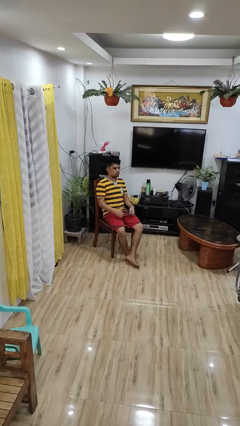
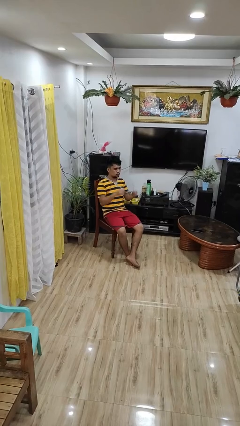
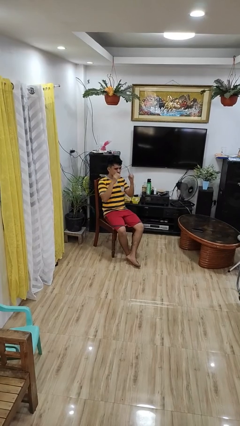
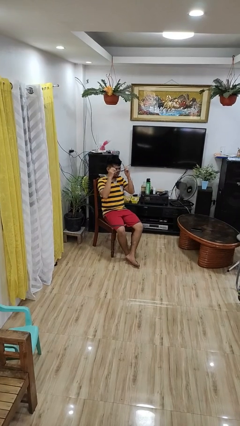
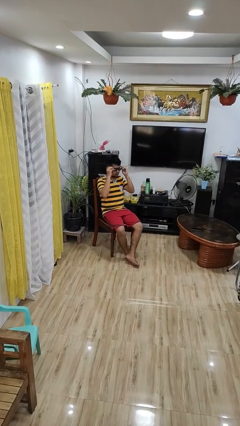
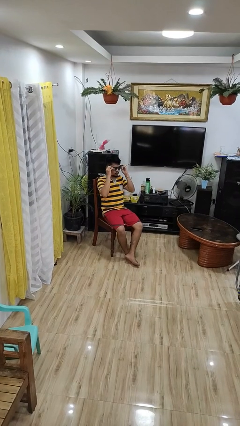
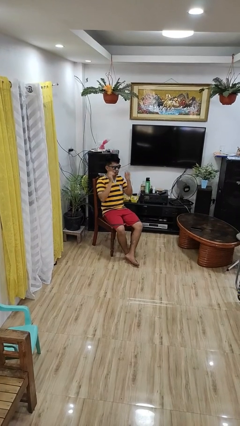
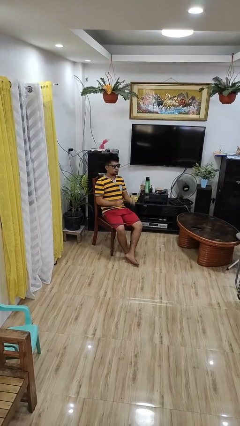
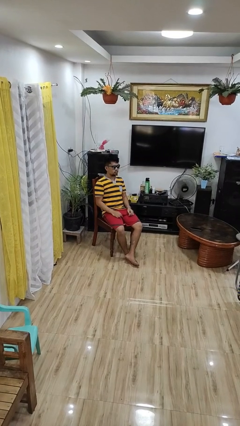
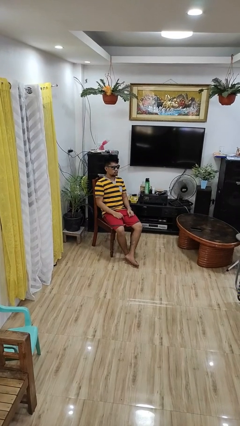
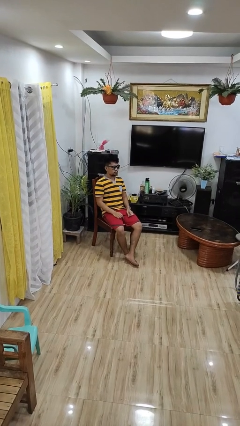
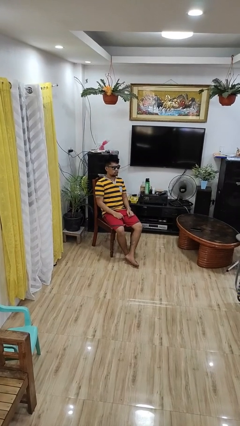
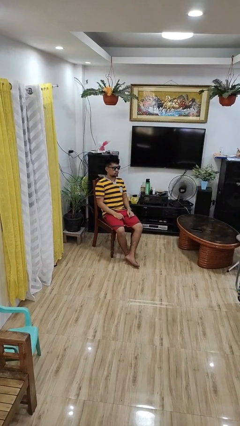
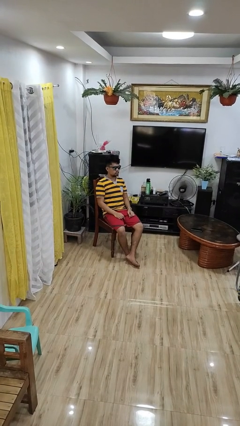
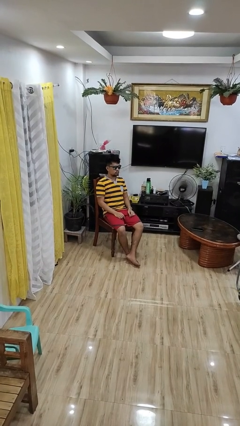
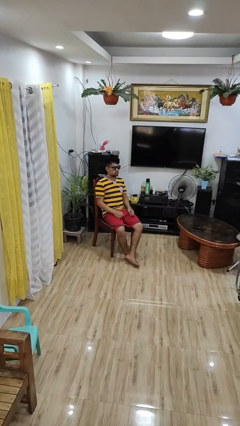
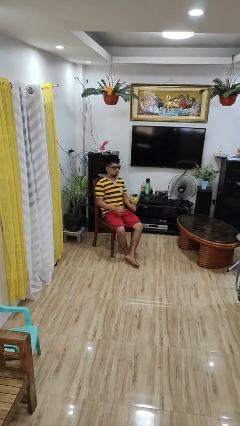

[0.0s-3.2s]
person puts on sunglasses

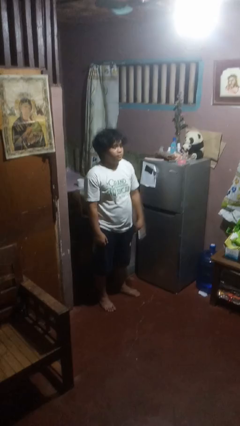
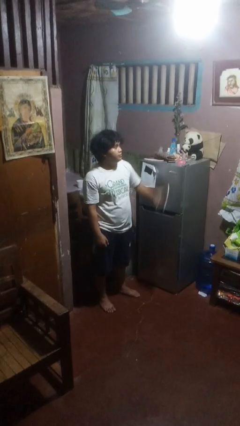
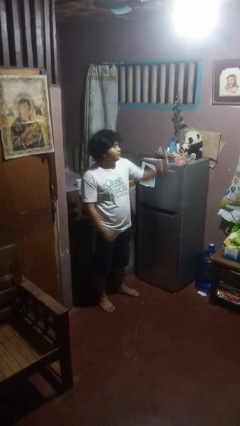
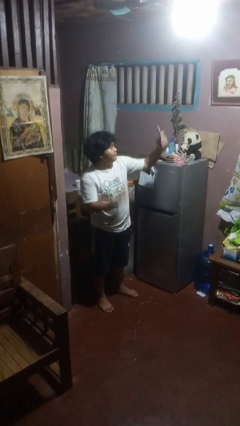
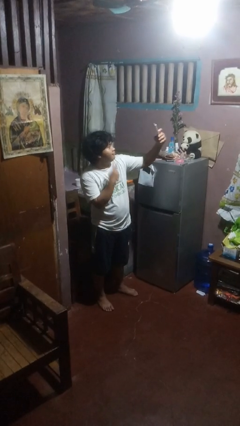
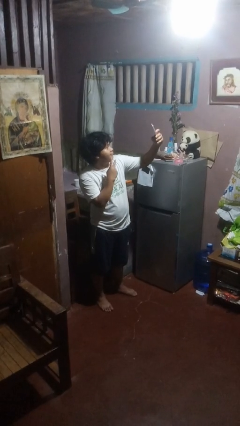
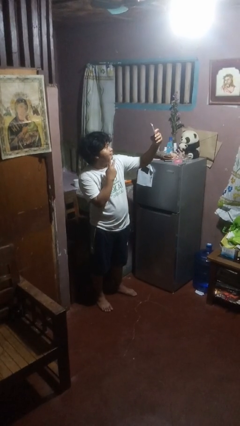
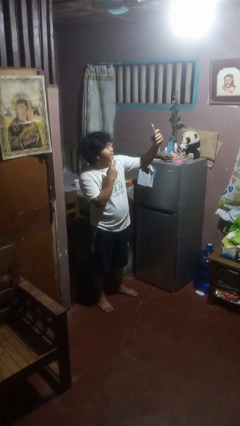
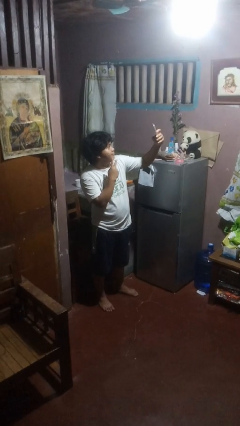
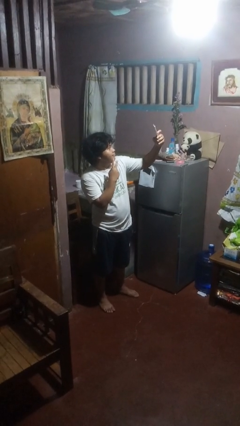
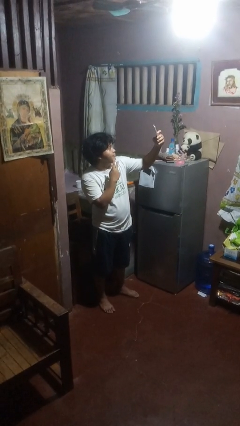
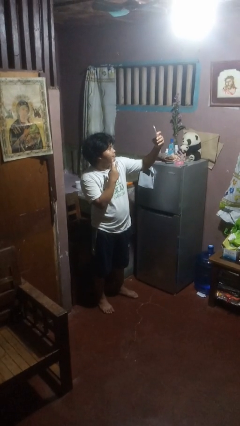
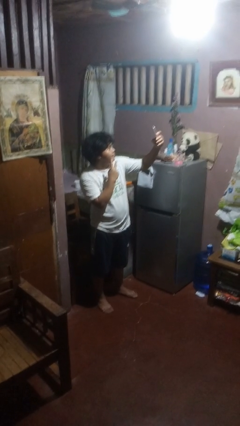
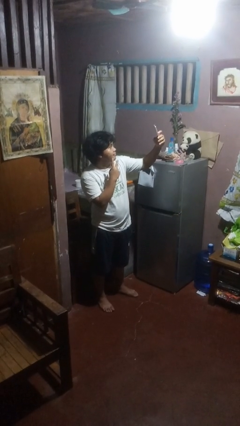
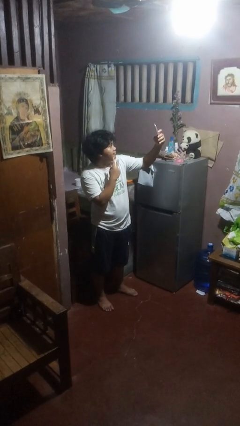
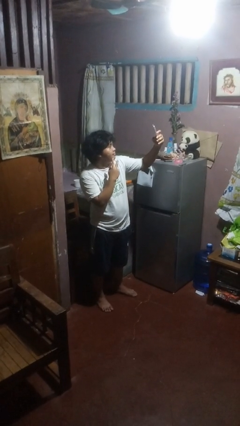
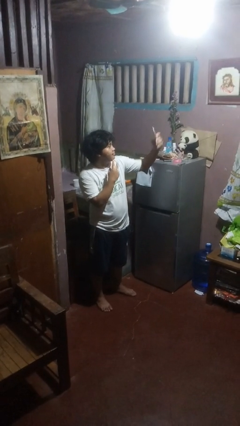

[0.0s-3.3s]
person takes selfie

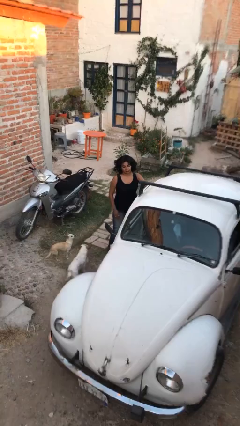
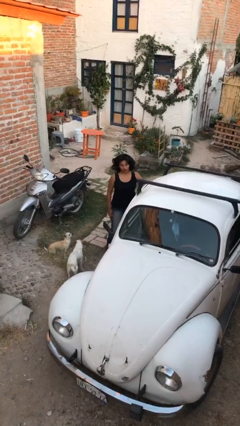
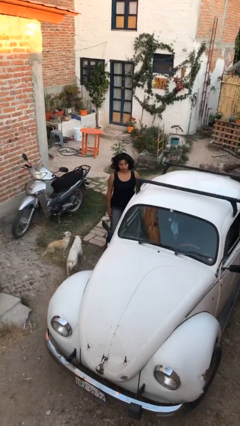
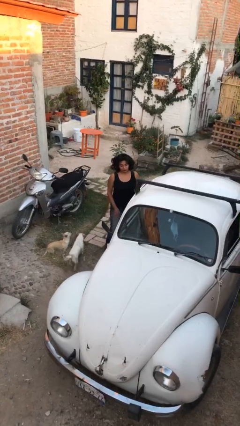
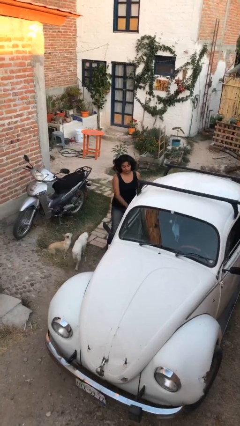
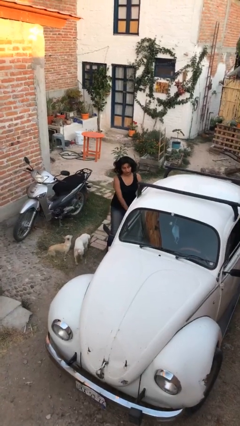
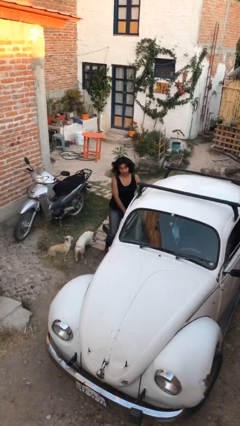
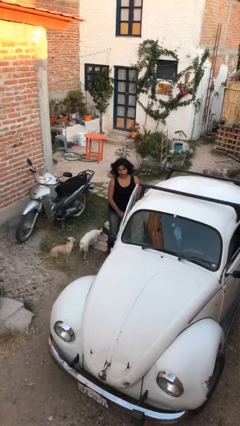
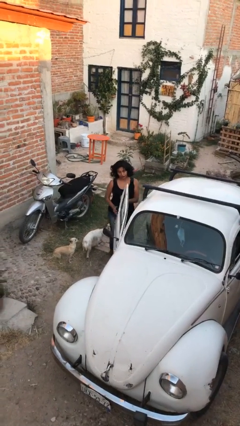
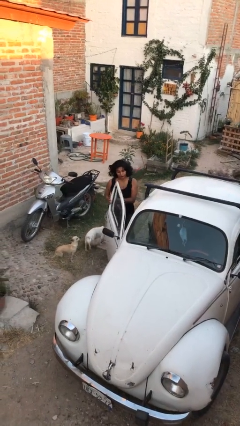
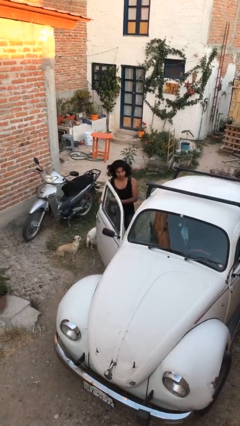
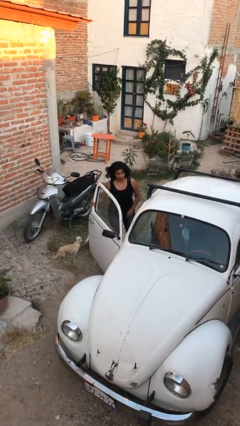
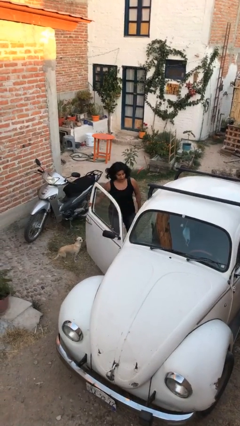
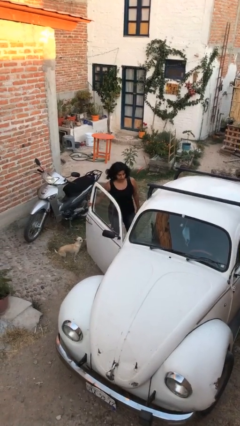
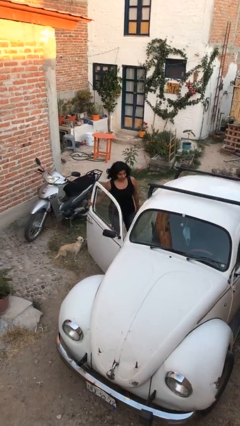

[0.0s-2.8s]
person opens car door

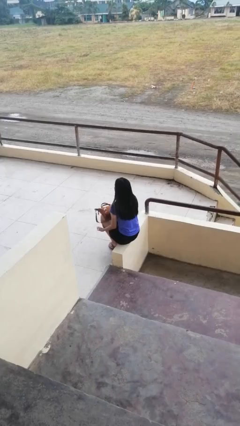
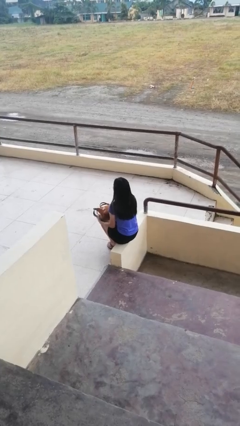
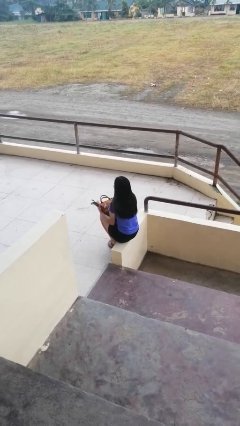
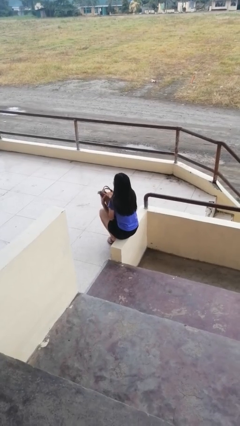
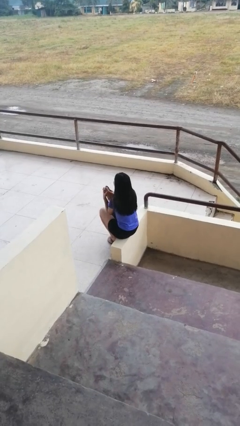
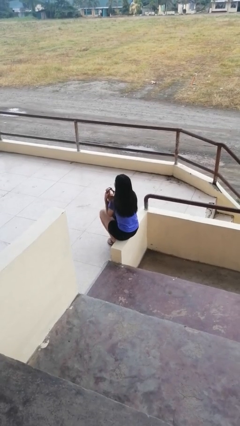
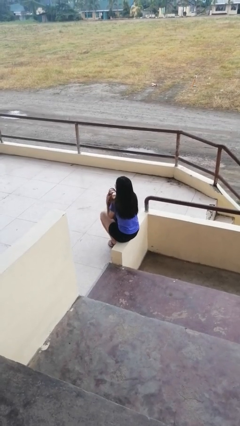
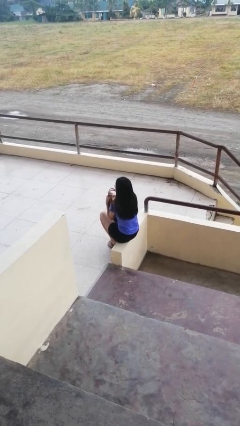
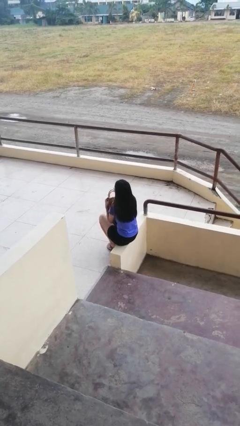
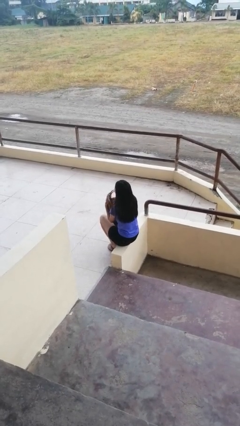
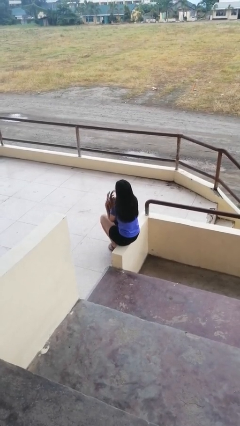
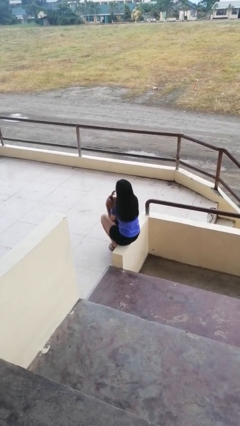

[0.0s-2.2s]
person squeezes object

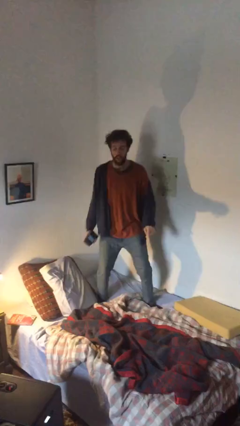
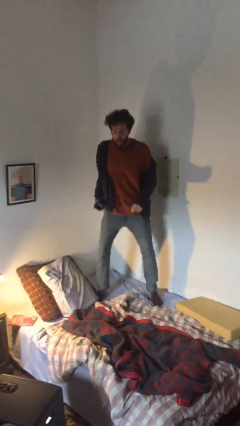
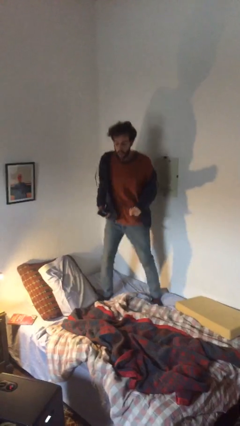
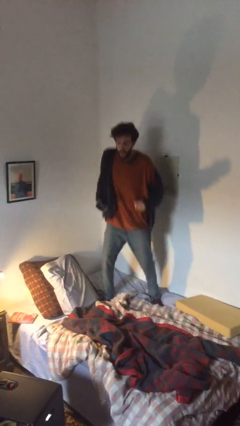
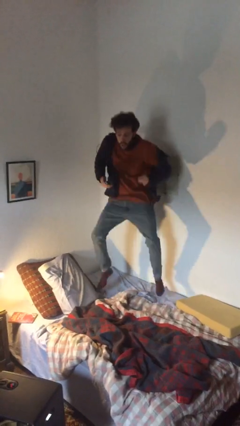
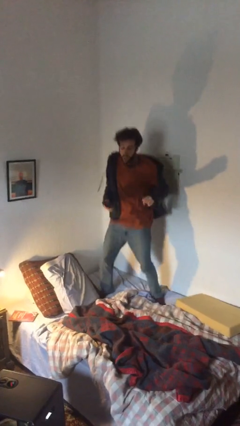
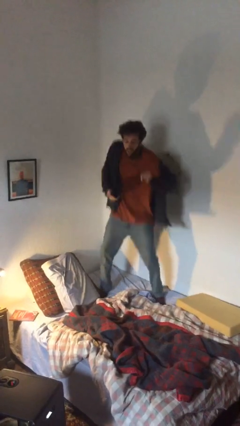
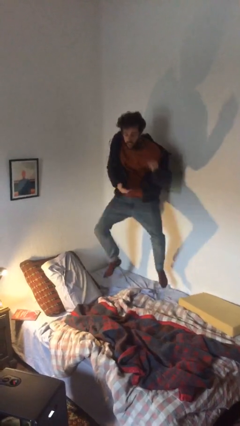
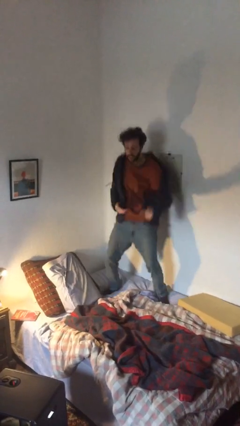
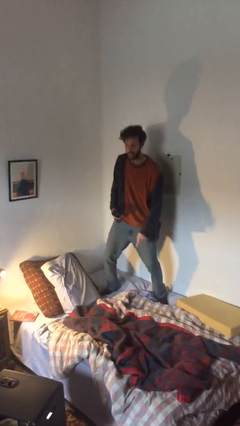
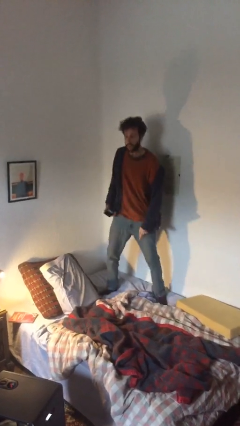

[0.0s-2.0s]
person jumps on bed

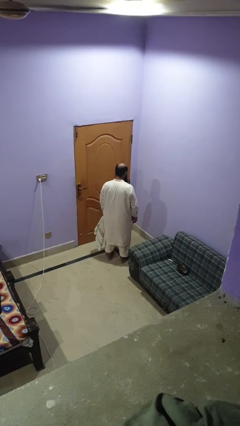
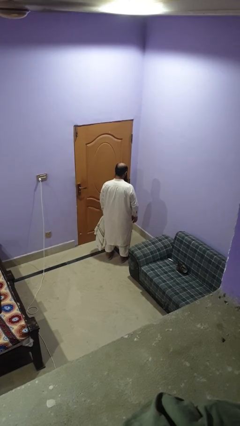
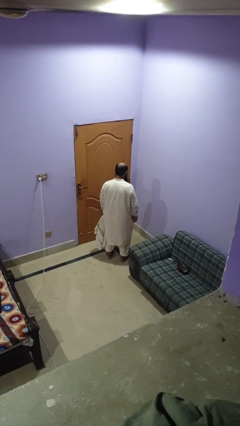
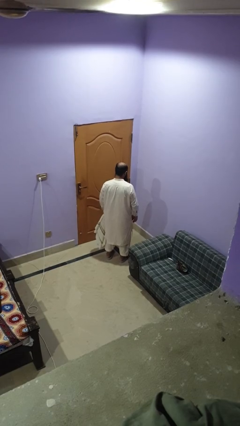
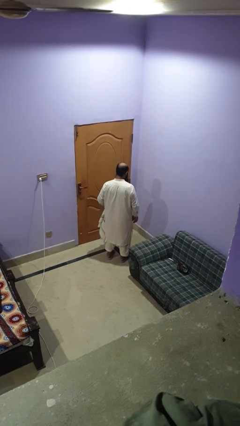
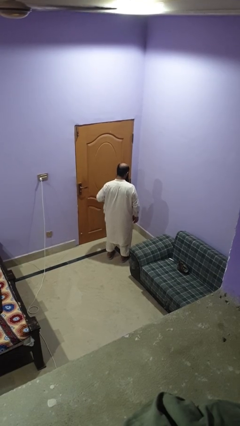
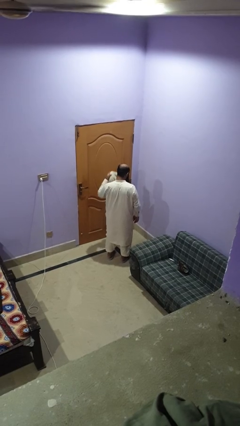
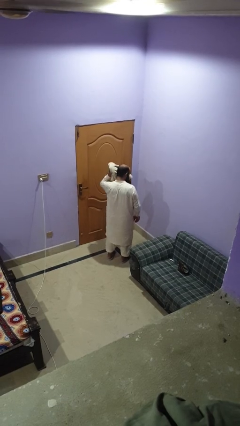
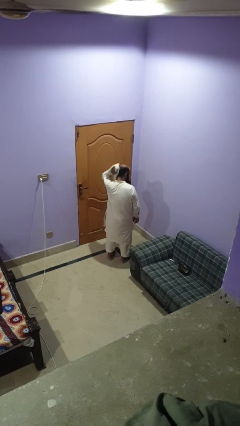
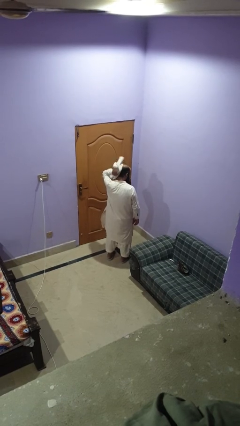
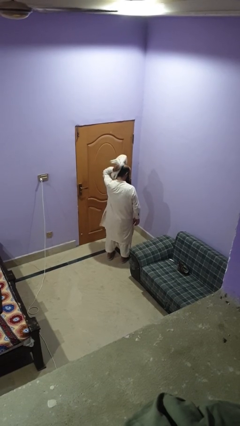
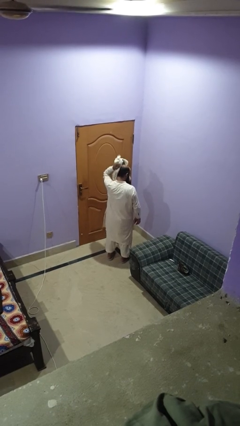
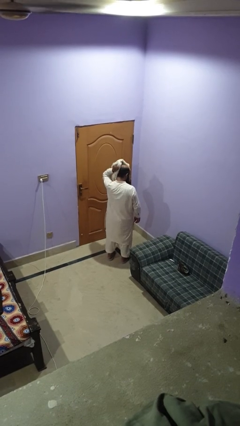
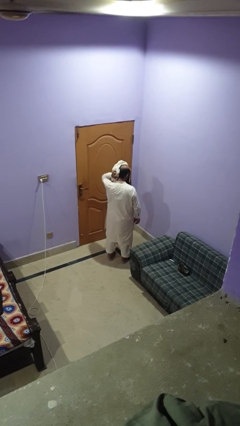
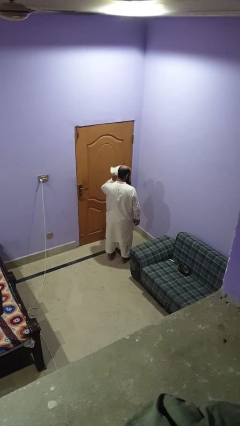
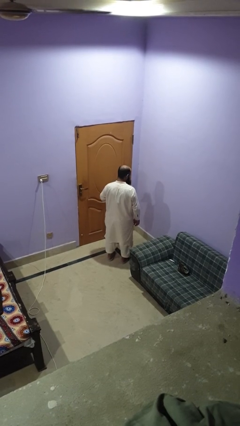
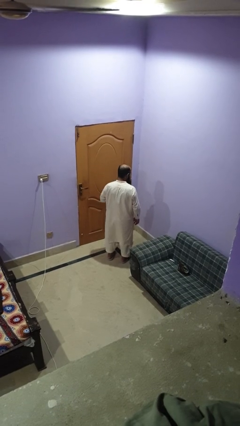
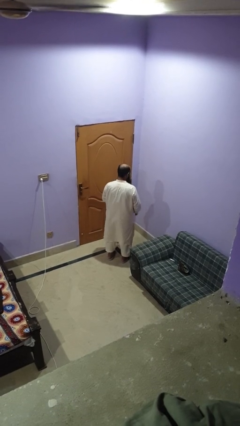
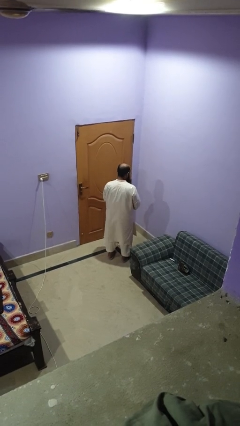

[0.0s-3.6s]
person dries hair with towel

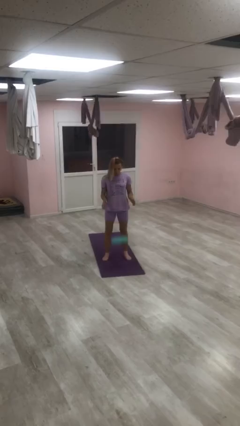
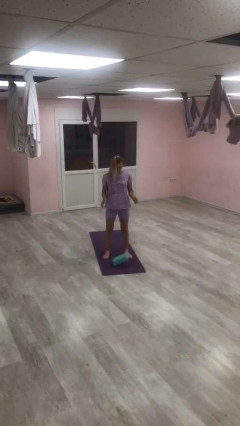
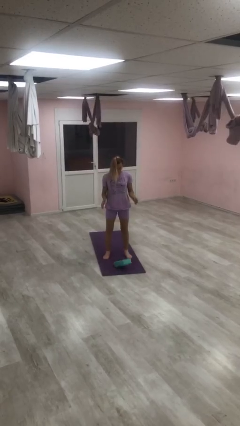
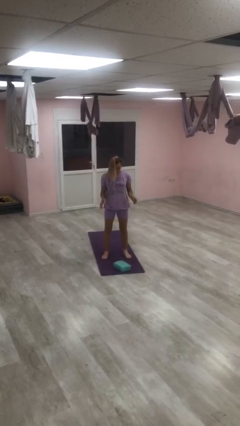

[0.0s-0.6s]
person drops object
